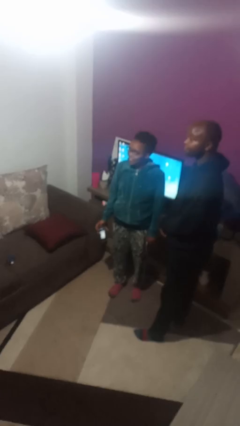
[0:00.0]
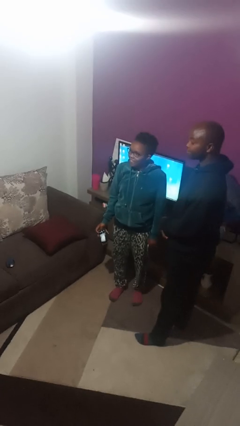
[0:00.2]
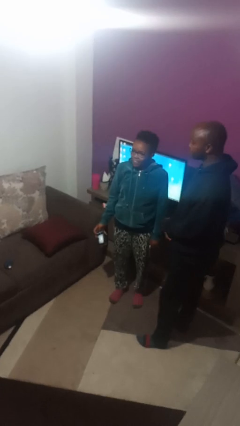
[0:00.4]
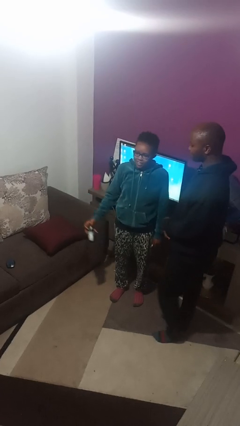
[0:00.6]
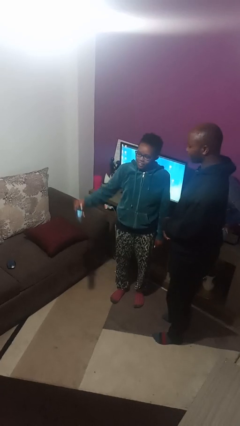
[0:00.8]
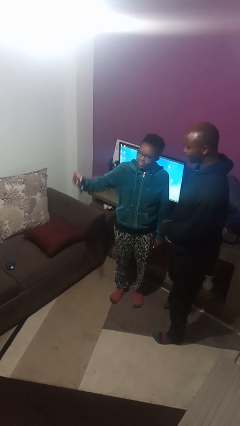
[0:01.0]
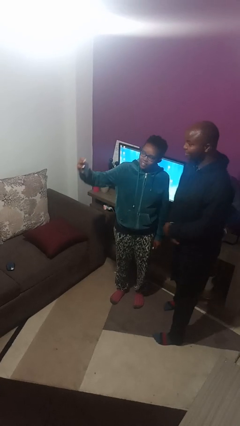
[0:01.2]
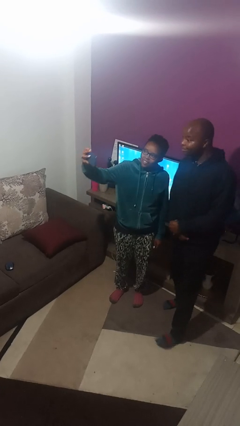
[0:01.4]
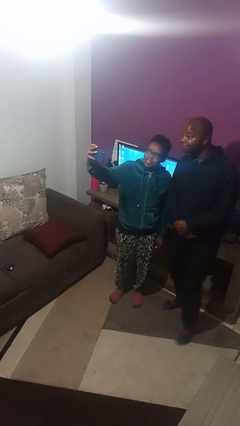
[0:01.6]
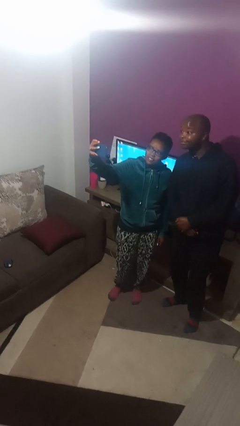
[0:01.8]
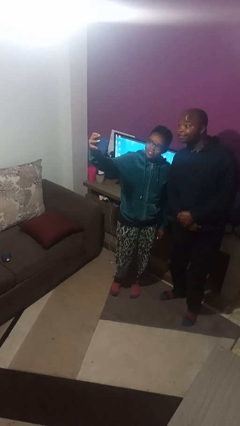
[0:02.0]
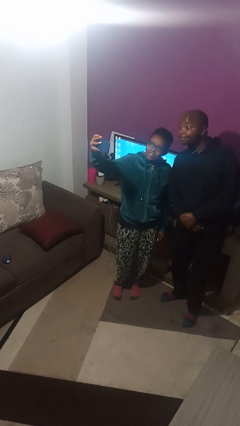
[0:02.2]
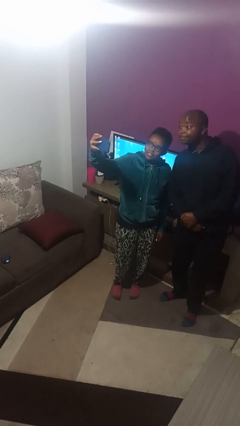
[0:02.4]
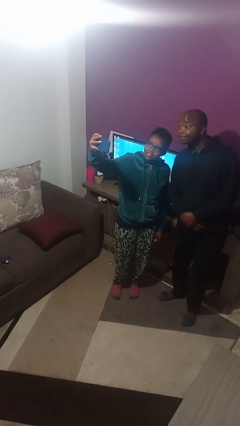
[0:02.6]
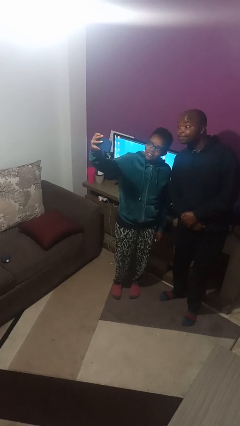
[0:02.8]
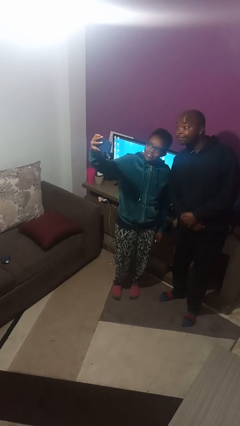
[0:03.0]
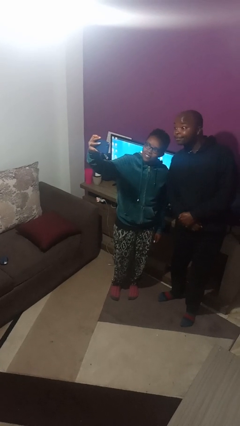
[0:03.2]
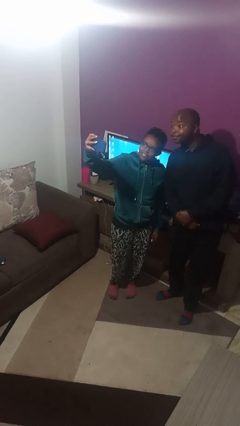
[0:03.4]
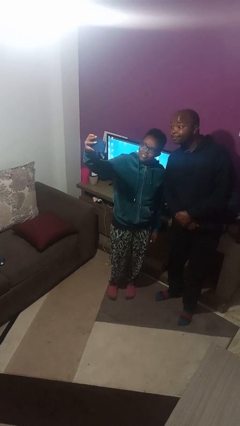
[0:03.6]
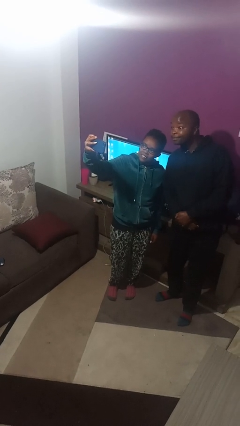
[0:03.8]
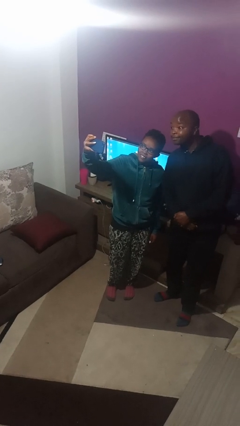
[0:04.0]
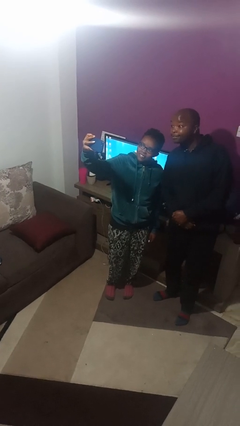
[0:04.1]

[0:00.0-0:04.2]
person takes selfie with person

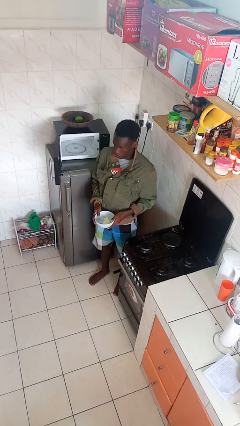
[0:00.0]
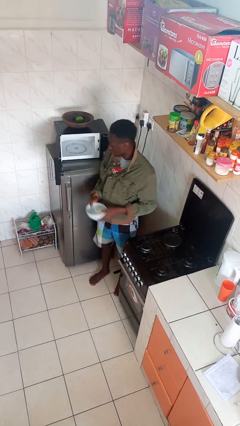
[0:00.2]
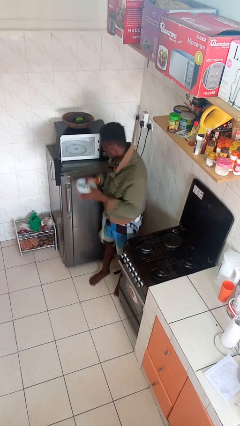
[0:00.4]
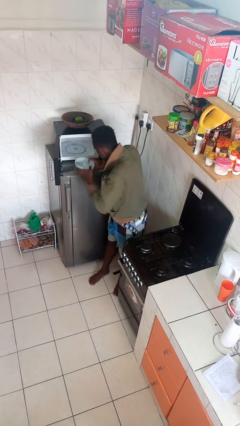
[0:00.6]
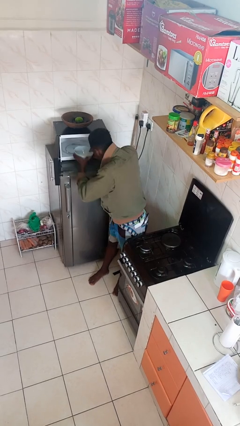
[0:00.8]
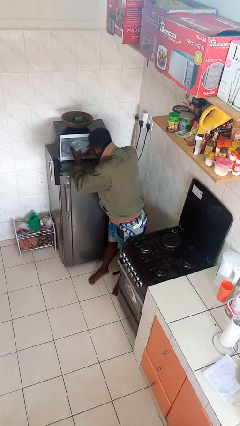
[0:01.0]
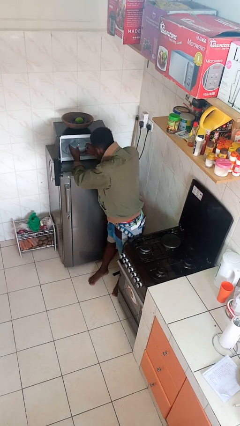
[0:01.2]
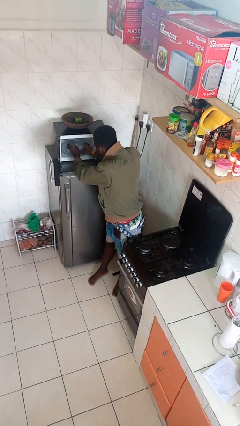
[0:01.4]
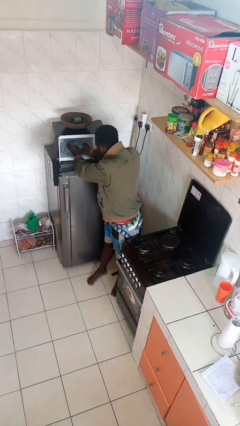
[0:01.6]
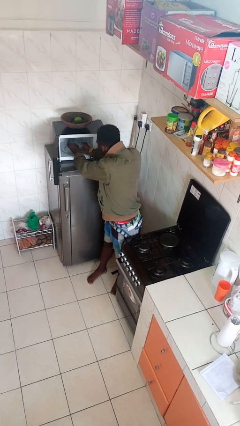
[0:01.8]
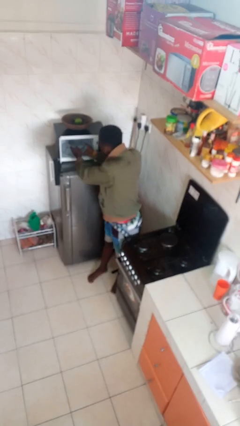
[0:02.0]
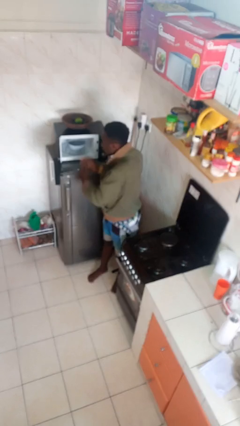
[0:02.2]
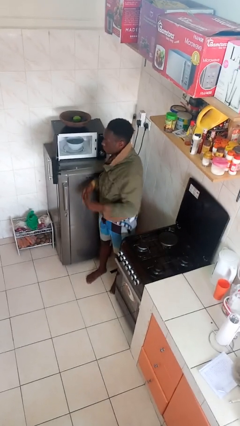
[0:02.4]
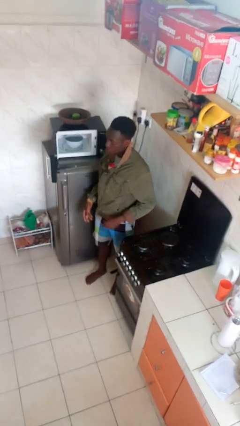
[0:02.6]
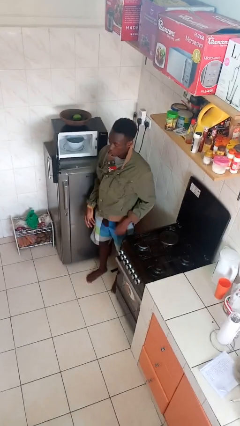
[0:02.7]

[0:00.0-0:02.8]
person puts object into microwave

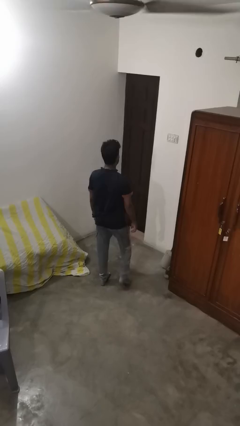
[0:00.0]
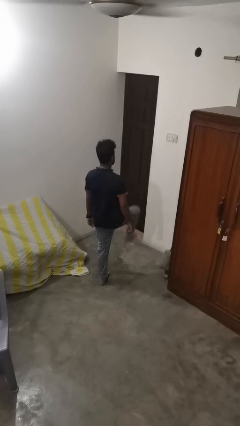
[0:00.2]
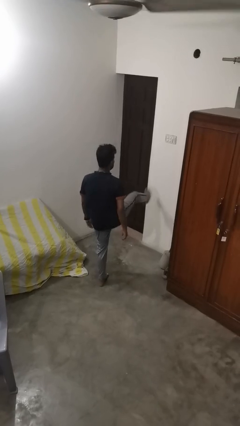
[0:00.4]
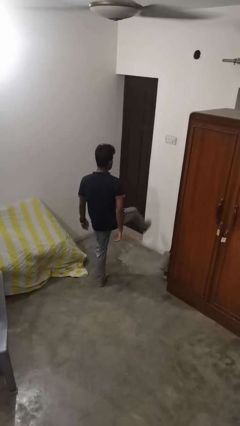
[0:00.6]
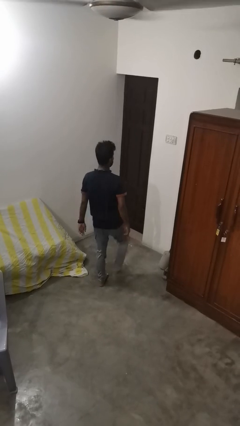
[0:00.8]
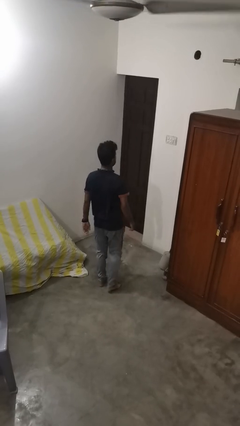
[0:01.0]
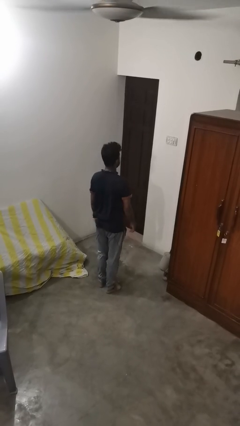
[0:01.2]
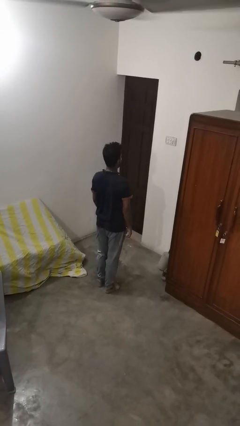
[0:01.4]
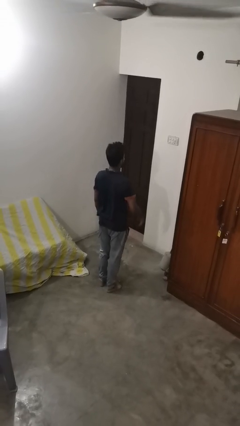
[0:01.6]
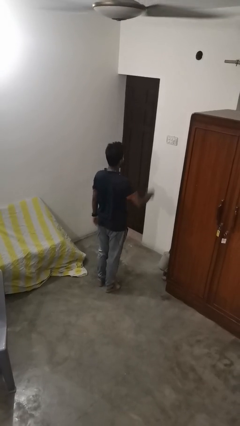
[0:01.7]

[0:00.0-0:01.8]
person karate kicks

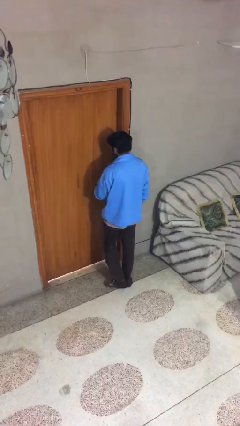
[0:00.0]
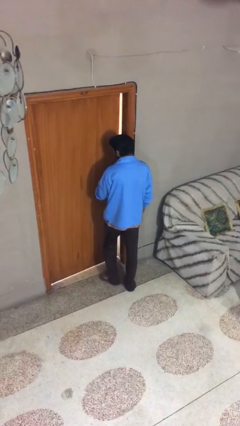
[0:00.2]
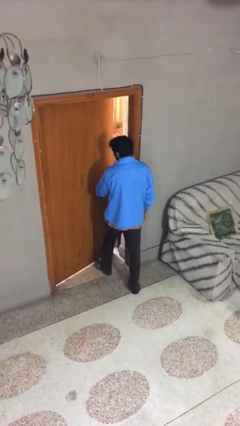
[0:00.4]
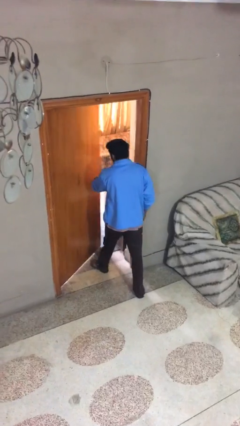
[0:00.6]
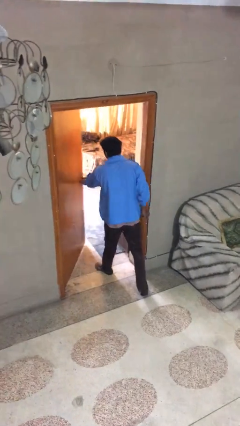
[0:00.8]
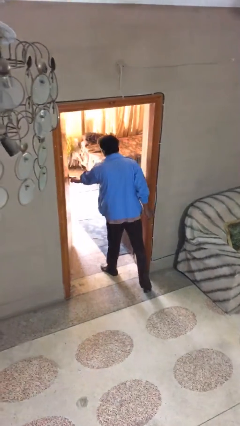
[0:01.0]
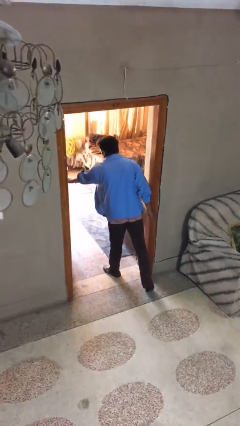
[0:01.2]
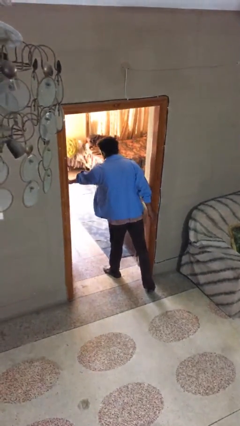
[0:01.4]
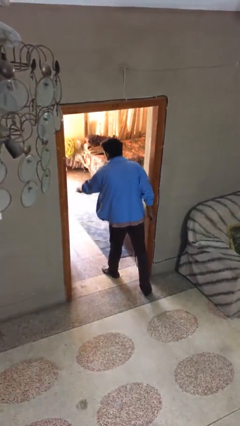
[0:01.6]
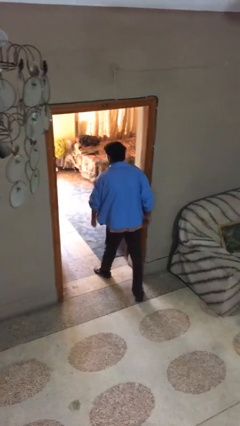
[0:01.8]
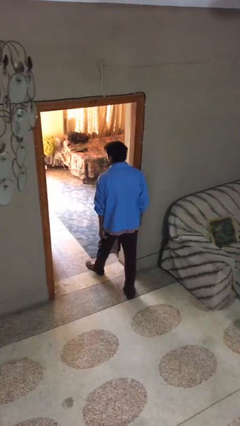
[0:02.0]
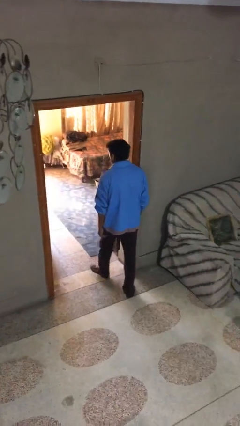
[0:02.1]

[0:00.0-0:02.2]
person opens facility door

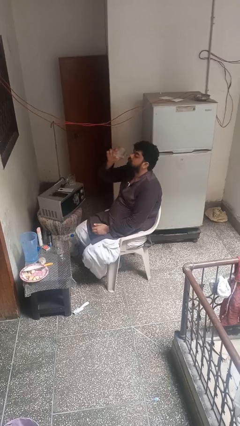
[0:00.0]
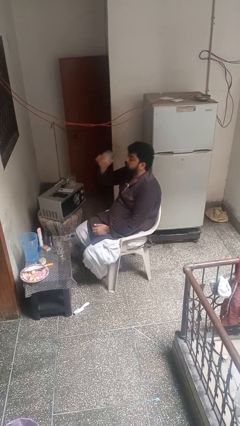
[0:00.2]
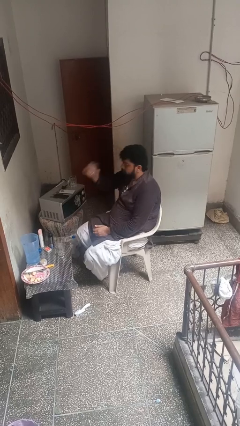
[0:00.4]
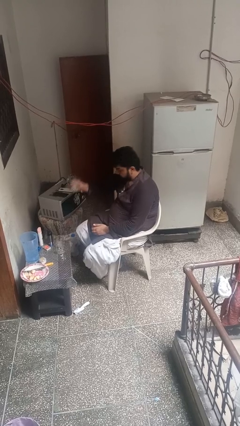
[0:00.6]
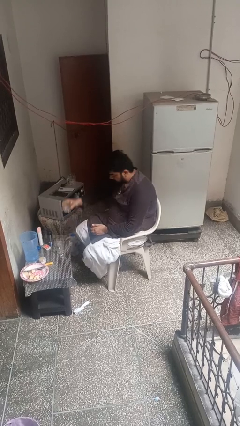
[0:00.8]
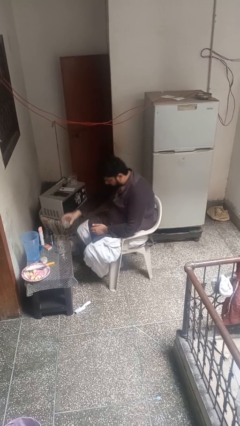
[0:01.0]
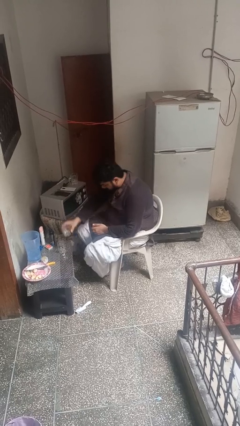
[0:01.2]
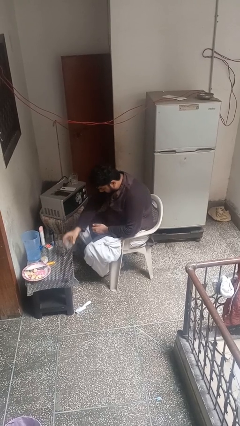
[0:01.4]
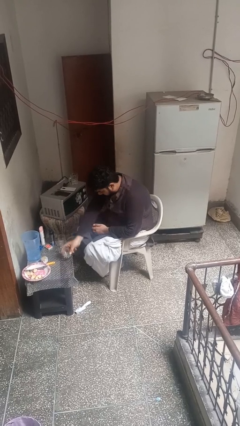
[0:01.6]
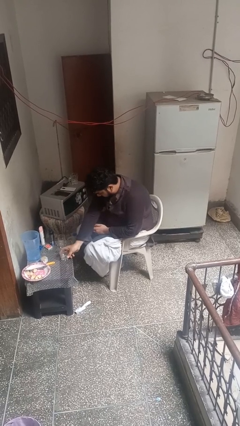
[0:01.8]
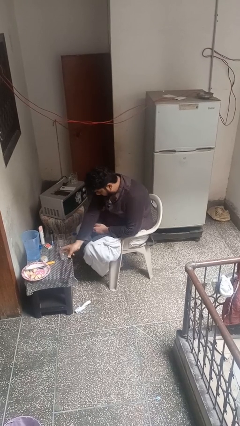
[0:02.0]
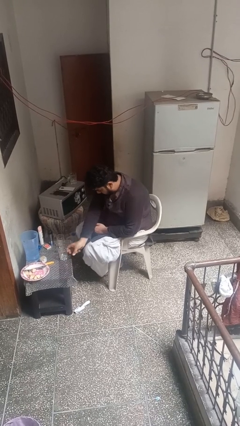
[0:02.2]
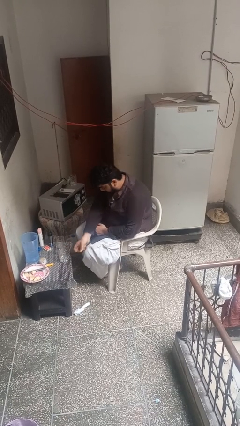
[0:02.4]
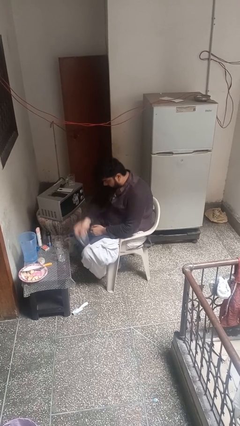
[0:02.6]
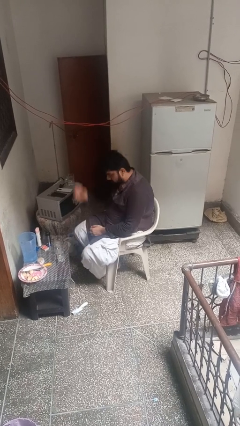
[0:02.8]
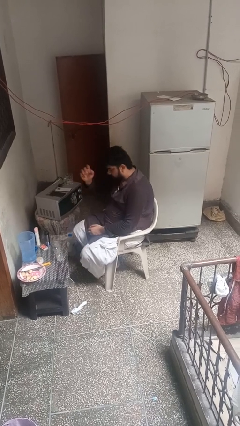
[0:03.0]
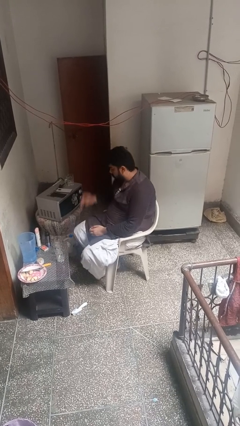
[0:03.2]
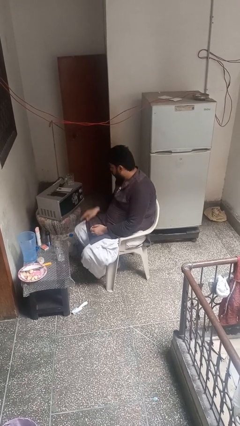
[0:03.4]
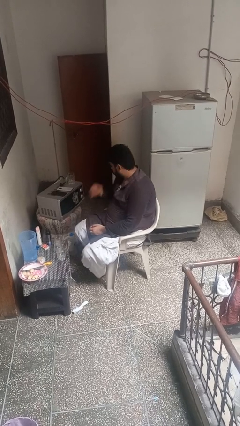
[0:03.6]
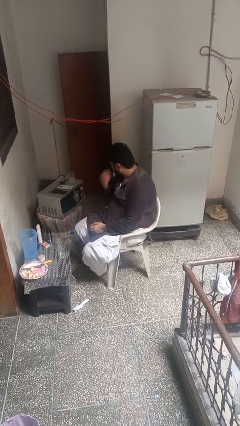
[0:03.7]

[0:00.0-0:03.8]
person puts down object on table

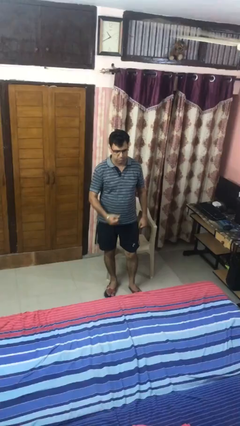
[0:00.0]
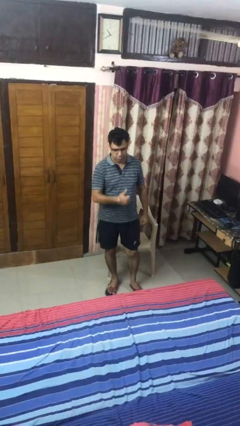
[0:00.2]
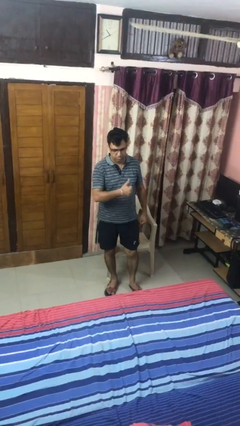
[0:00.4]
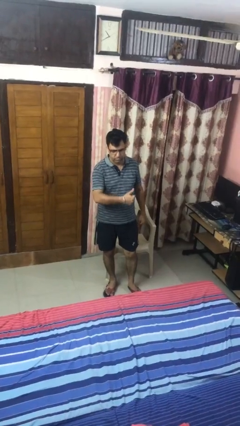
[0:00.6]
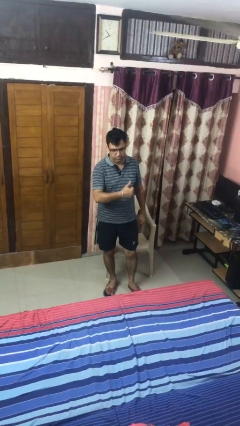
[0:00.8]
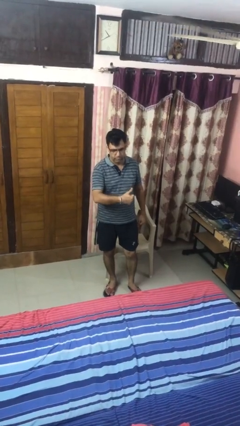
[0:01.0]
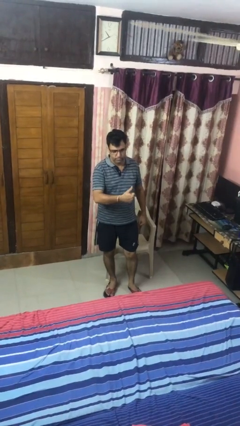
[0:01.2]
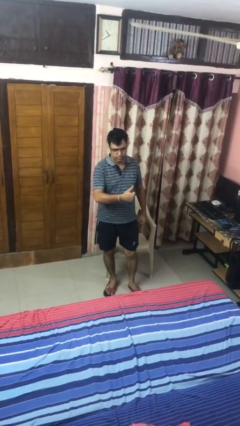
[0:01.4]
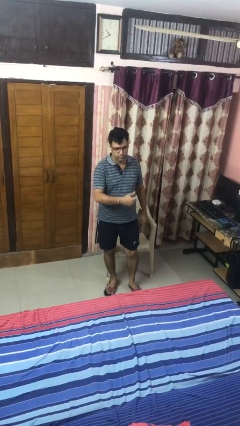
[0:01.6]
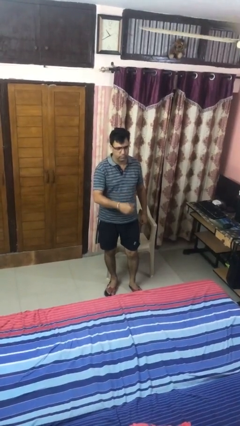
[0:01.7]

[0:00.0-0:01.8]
person gestures thumbs up

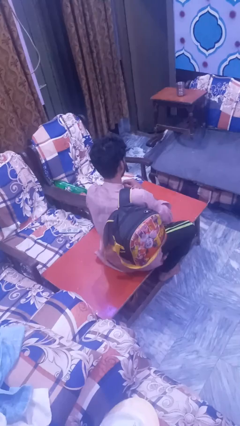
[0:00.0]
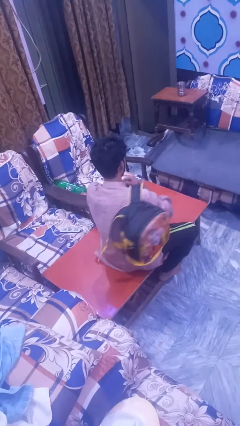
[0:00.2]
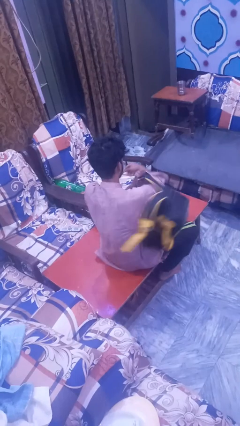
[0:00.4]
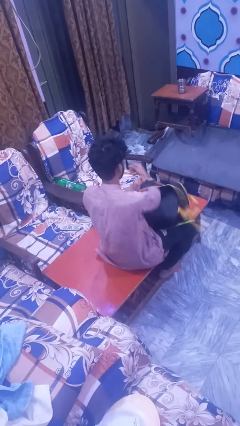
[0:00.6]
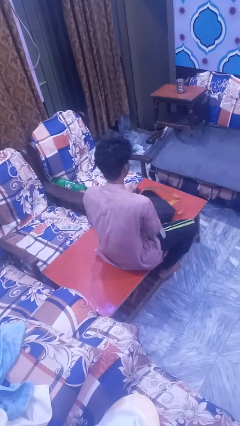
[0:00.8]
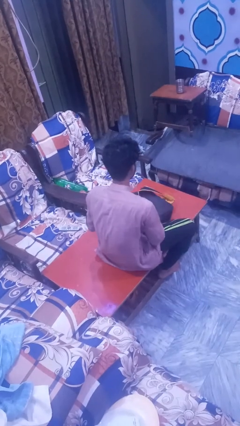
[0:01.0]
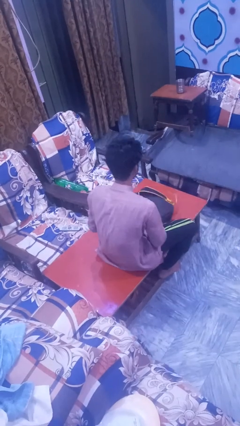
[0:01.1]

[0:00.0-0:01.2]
person takes off backpack
